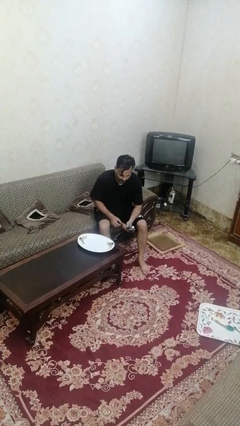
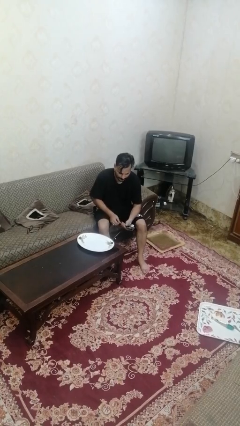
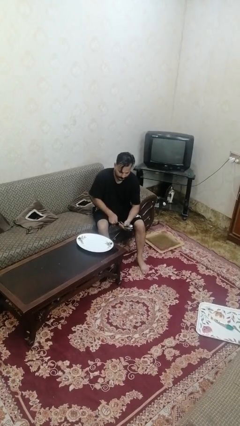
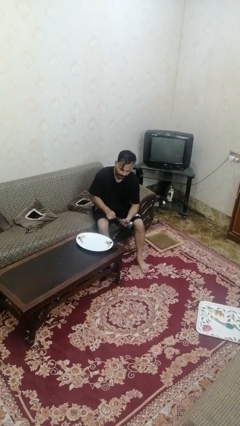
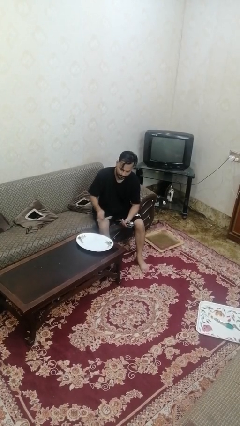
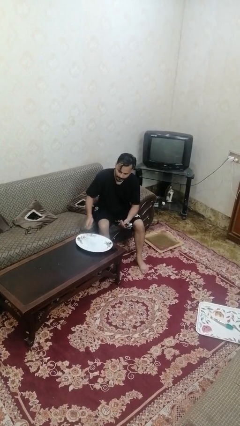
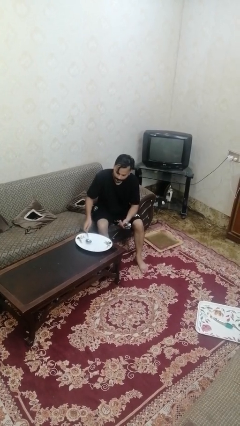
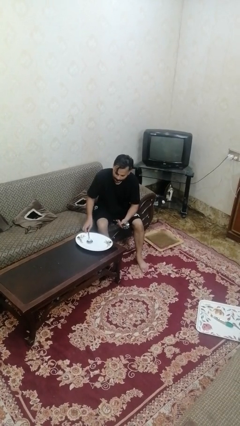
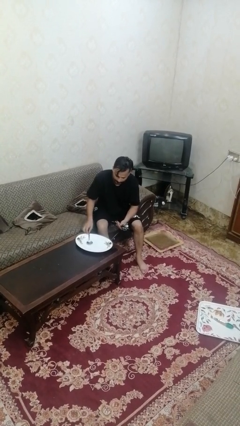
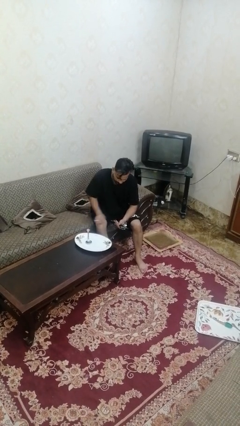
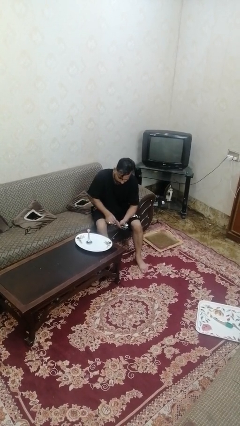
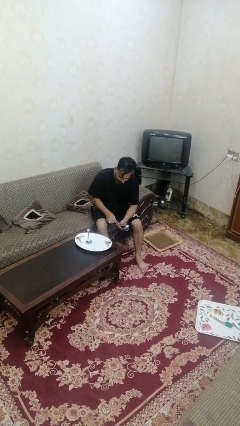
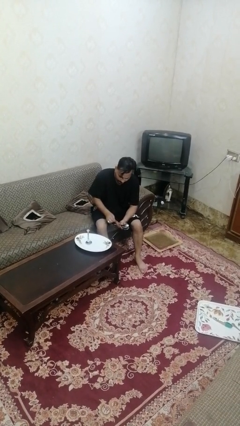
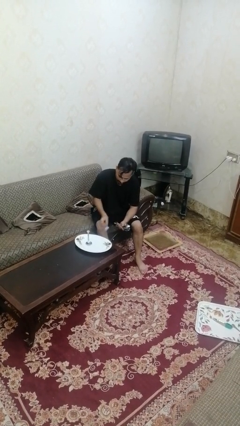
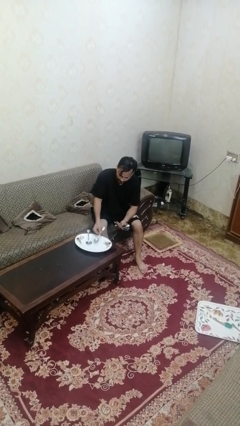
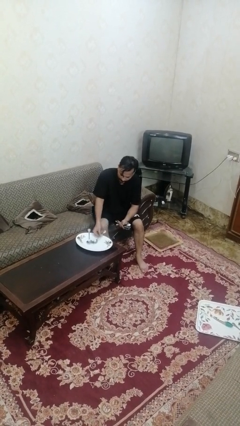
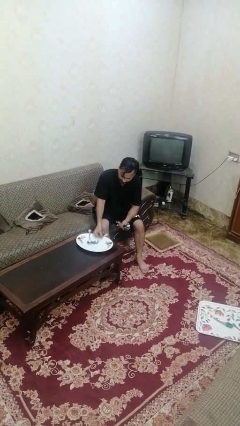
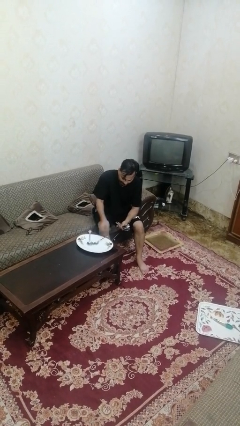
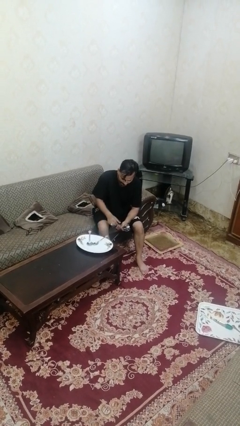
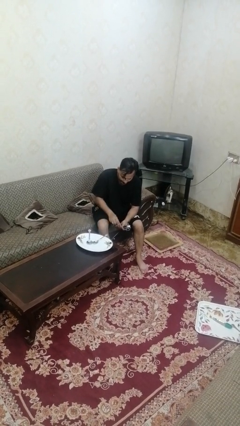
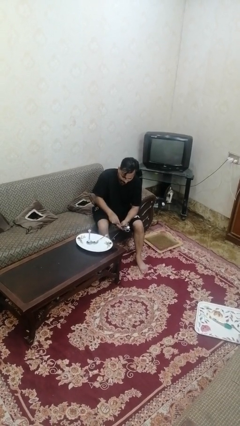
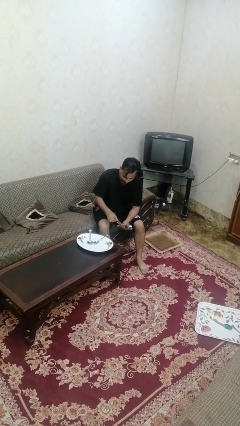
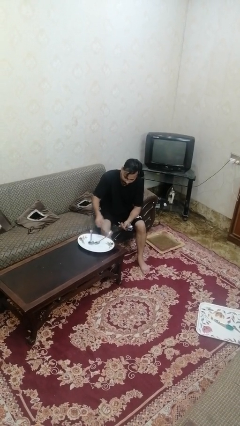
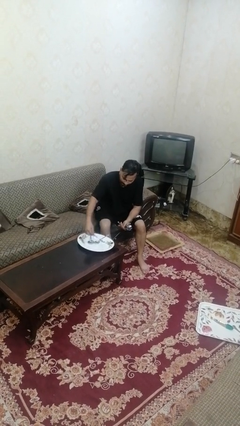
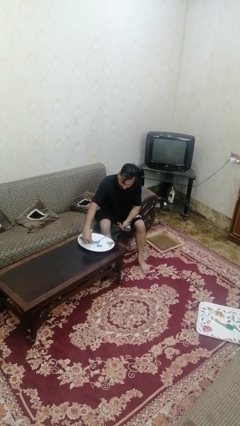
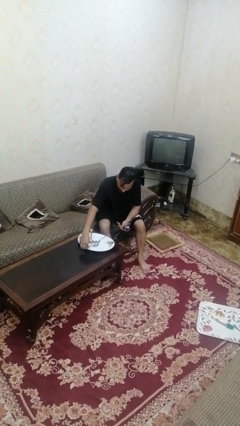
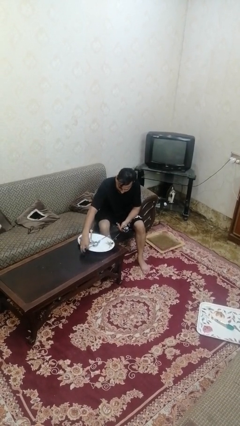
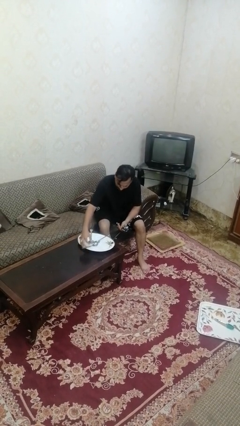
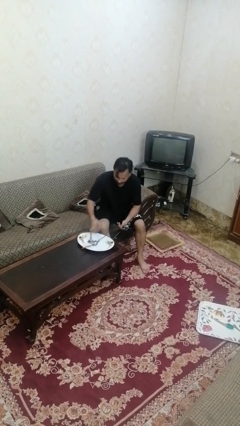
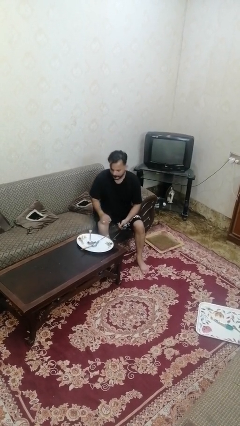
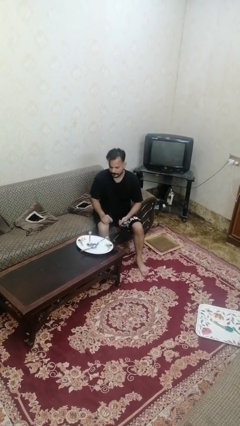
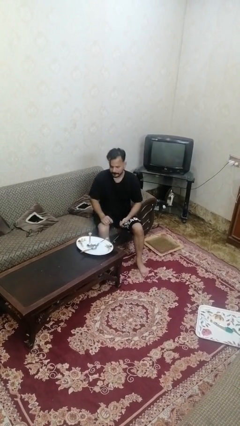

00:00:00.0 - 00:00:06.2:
person sets table

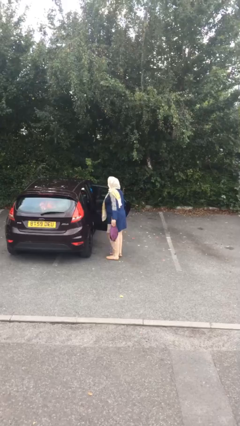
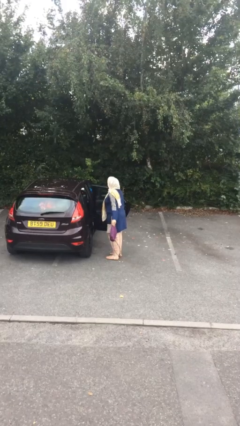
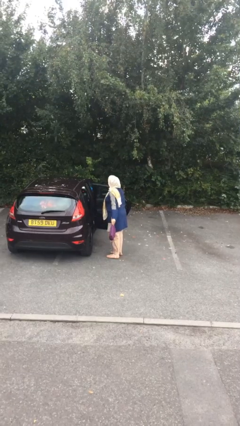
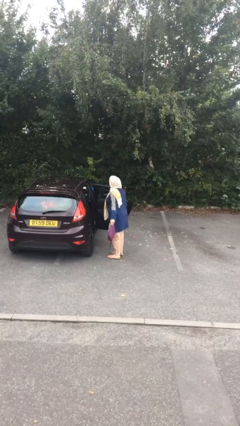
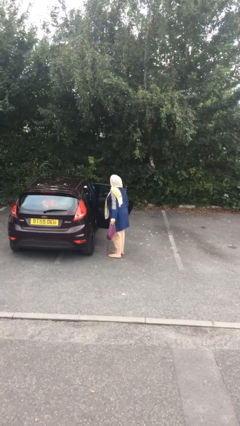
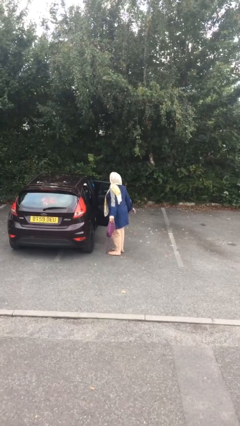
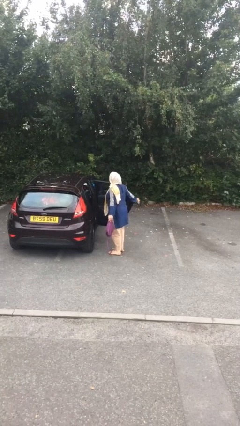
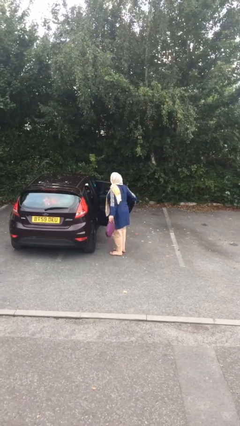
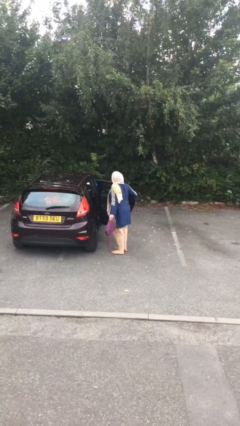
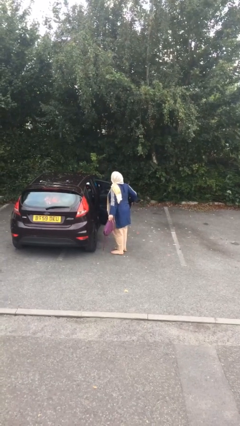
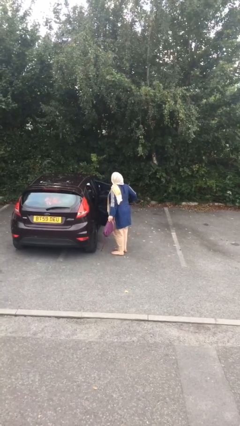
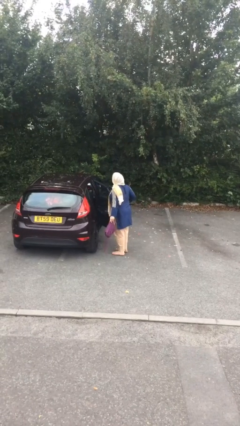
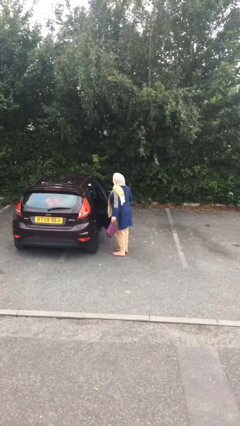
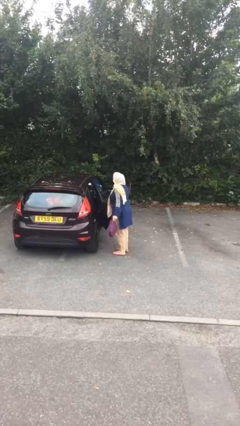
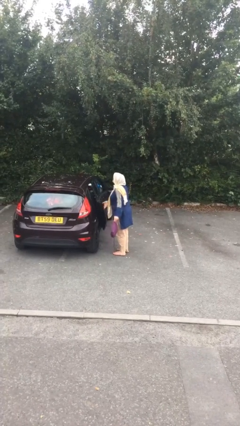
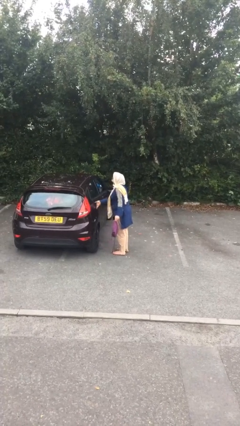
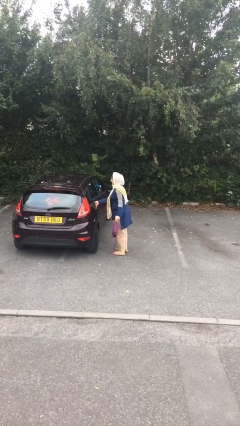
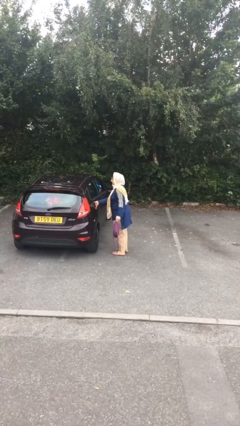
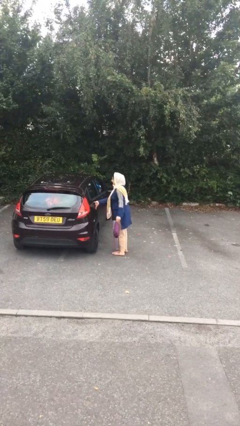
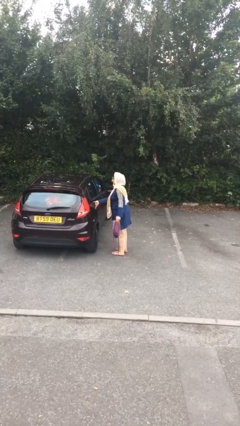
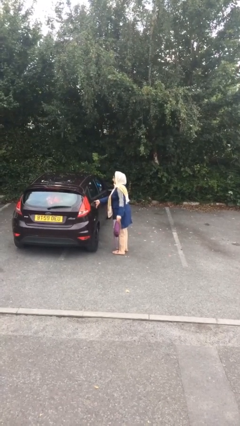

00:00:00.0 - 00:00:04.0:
person closes car door

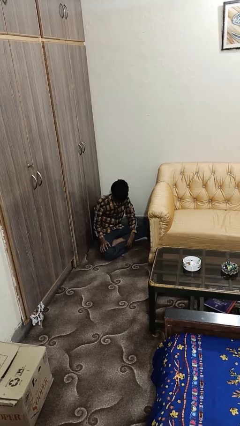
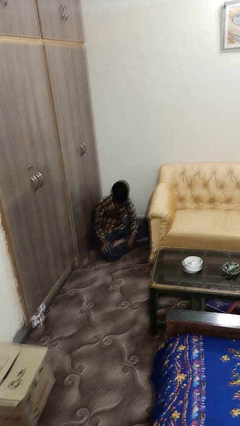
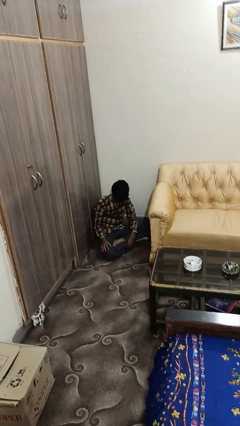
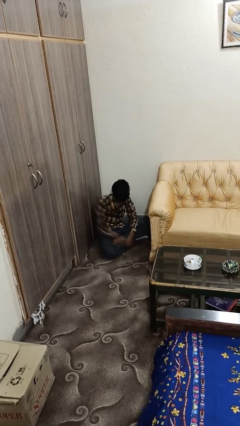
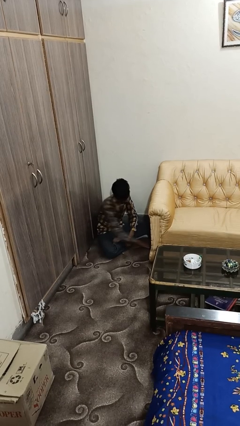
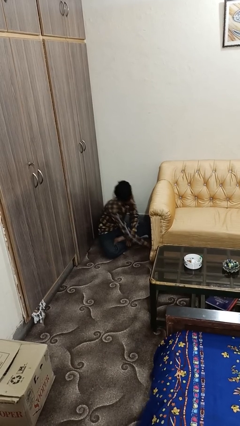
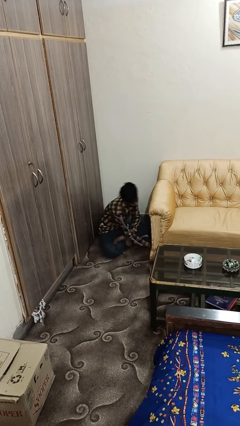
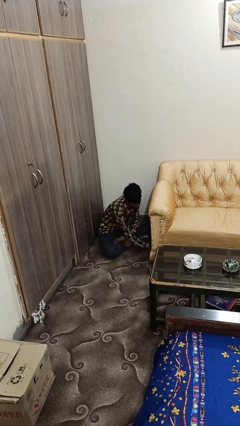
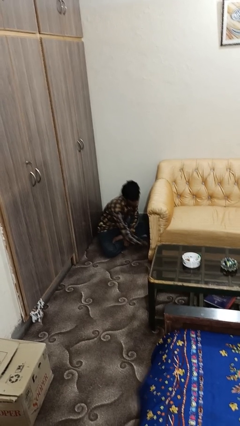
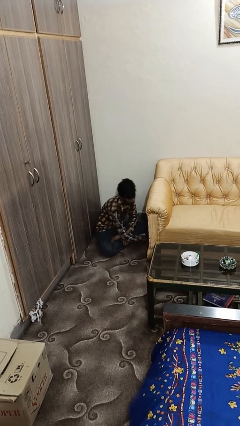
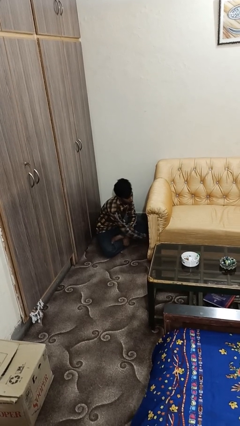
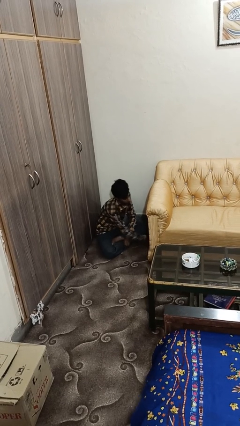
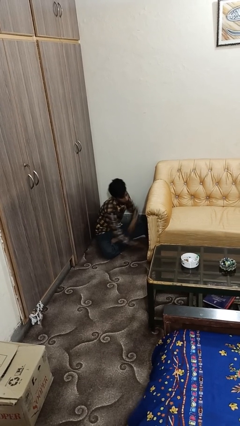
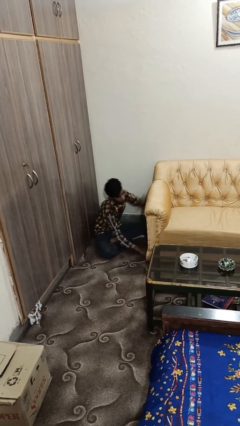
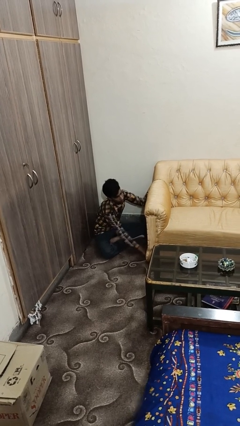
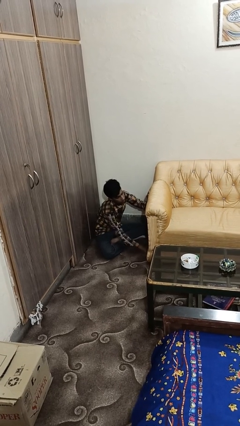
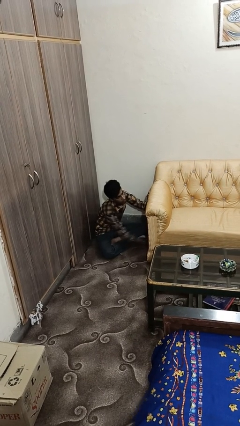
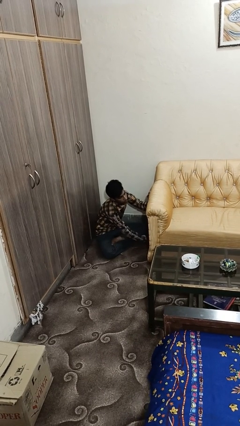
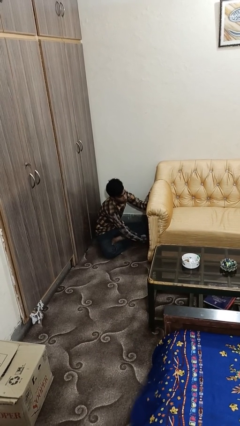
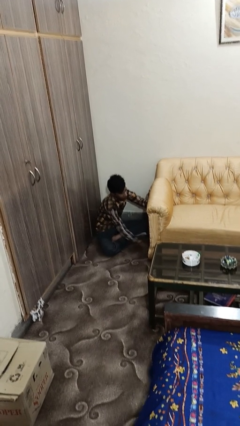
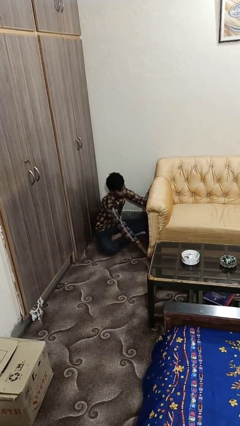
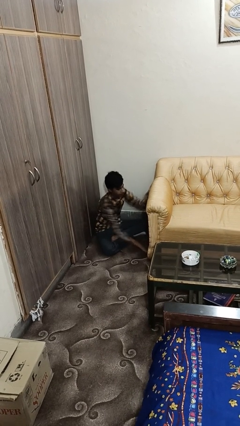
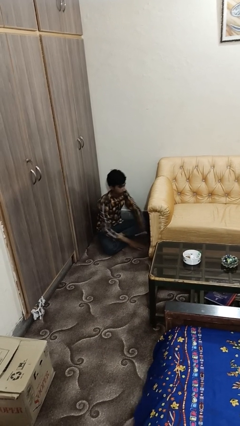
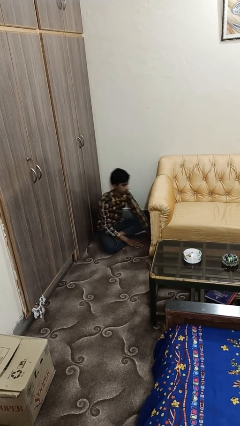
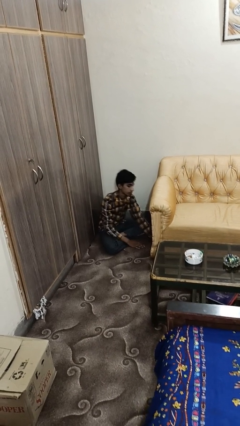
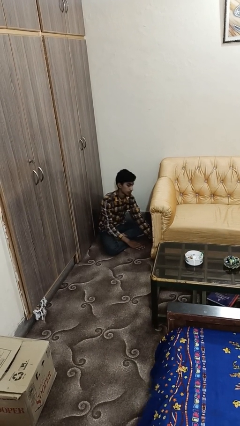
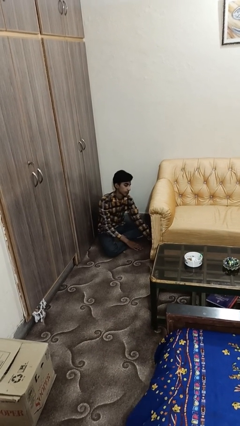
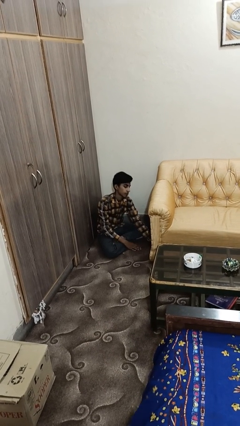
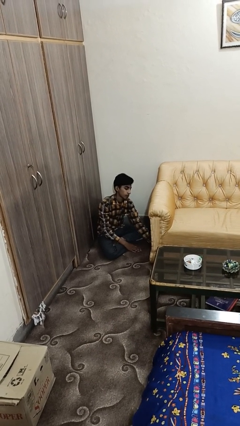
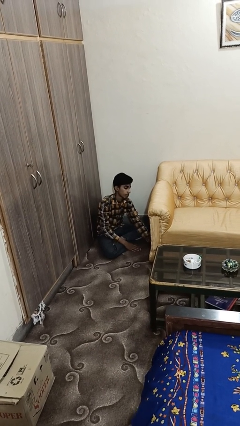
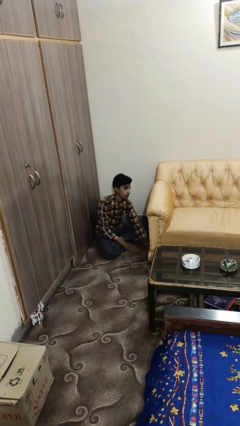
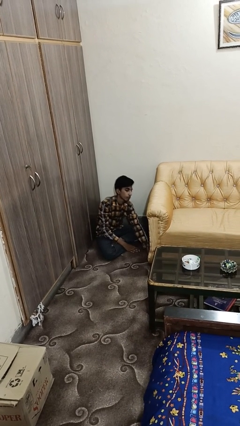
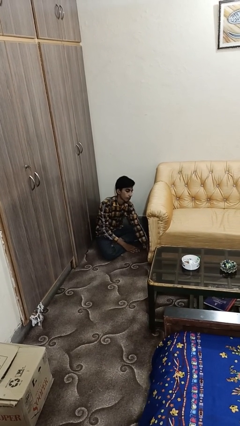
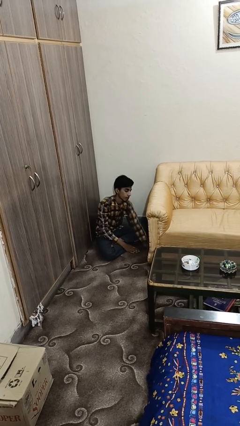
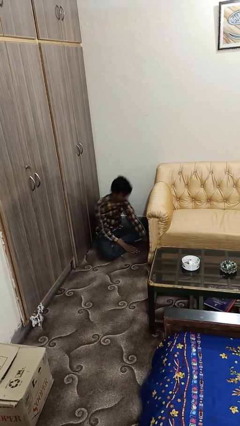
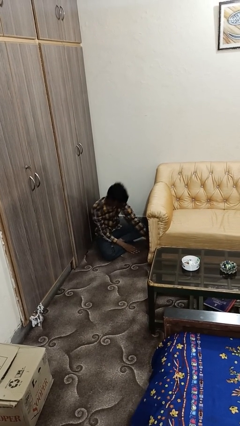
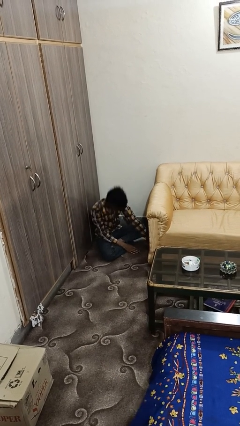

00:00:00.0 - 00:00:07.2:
person searches under couch

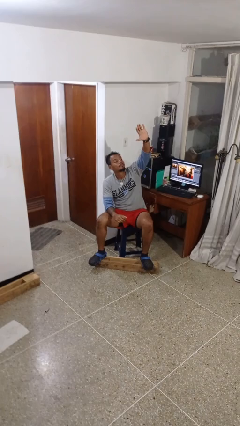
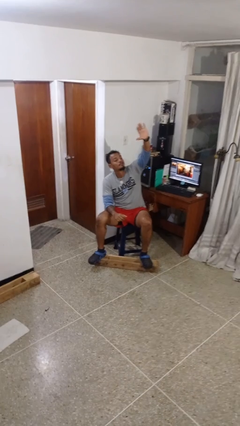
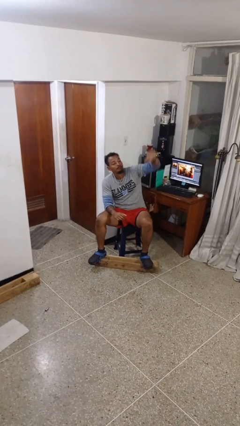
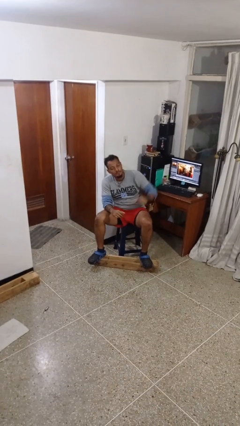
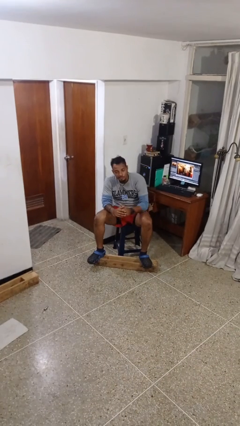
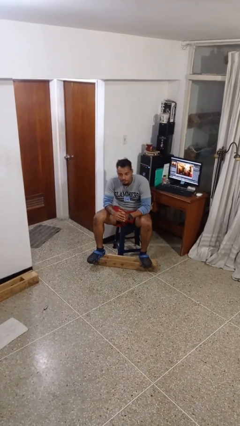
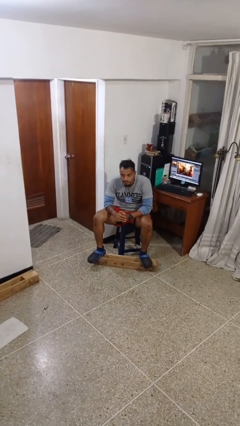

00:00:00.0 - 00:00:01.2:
person gestures lower hand
